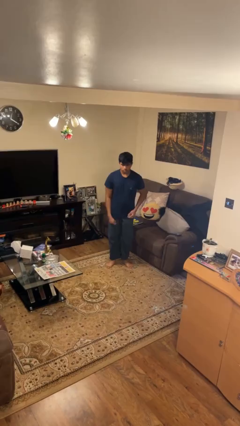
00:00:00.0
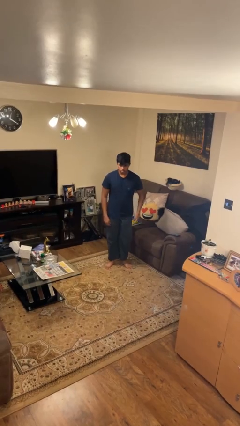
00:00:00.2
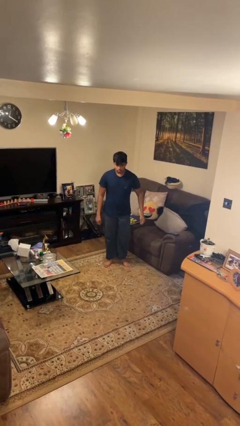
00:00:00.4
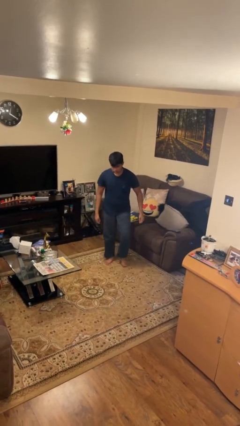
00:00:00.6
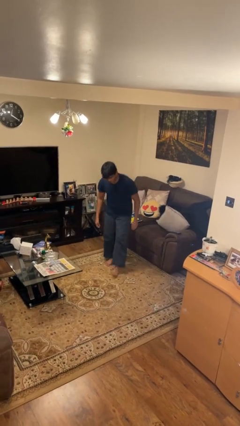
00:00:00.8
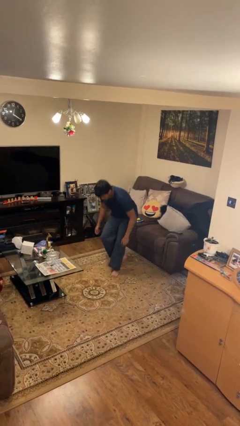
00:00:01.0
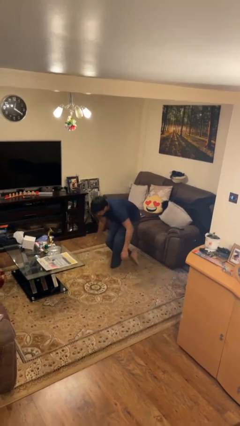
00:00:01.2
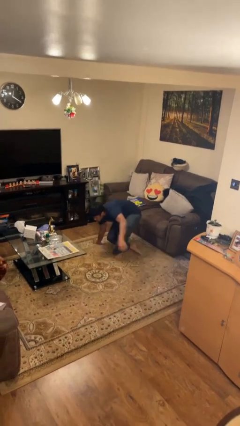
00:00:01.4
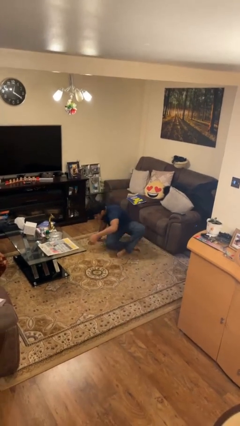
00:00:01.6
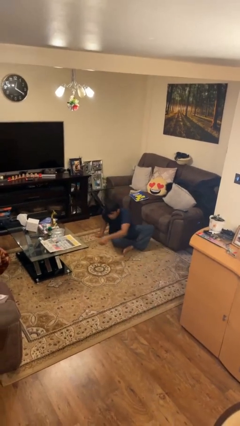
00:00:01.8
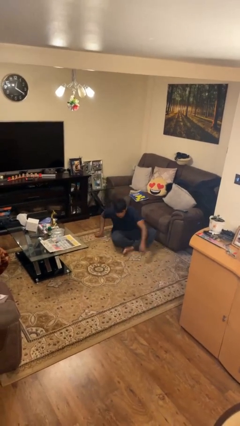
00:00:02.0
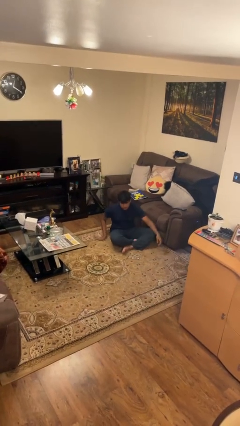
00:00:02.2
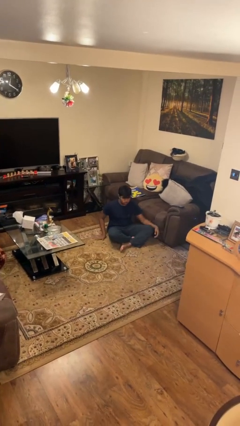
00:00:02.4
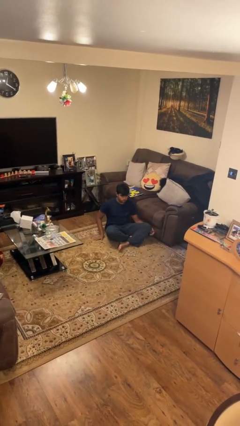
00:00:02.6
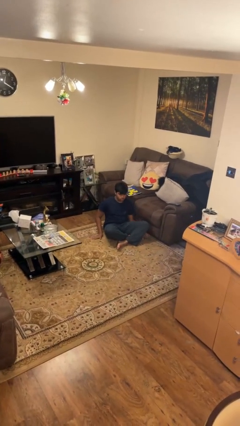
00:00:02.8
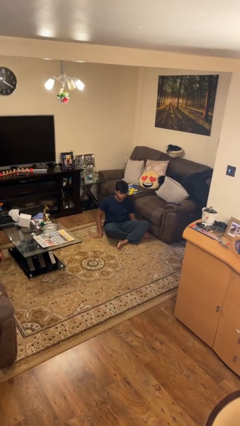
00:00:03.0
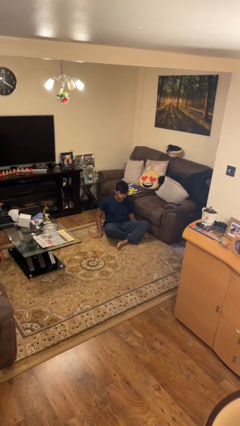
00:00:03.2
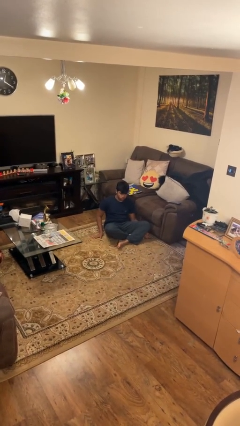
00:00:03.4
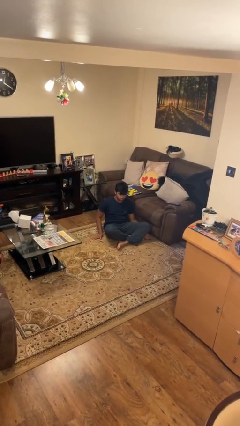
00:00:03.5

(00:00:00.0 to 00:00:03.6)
person sits crisscross

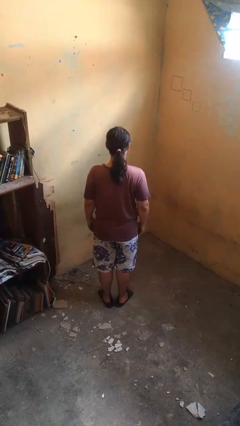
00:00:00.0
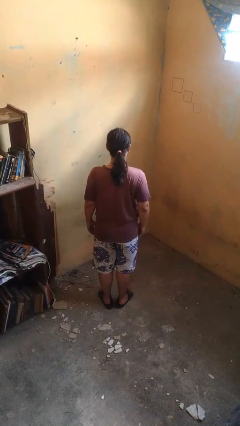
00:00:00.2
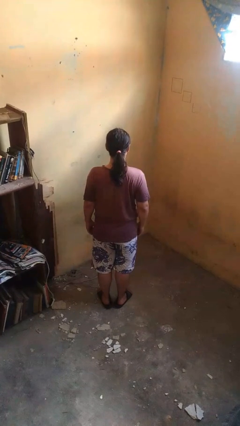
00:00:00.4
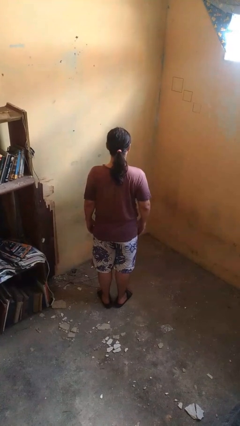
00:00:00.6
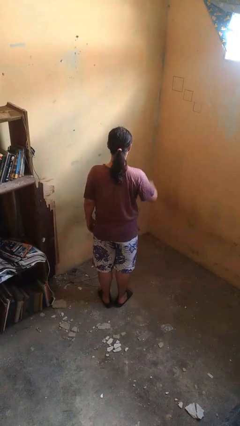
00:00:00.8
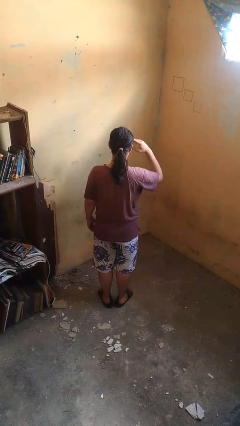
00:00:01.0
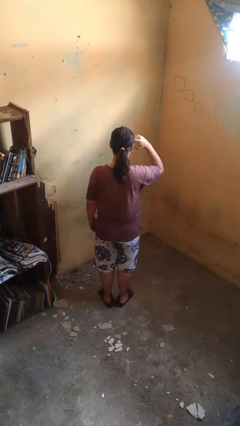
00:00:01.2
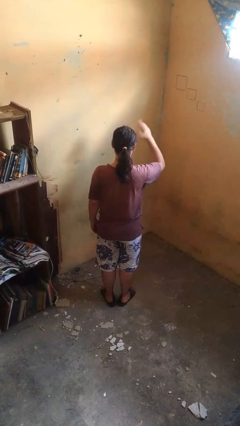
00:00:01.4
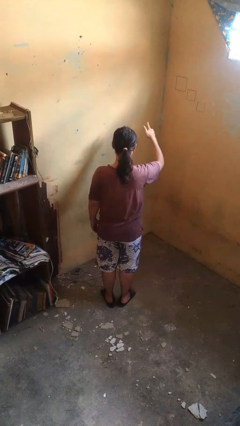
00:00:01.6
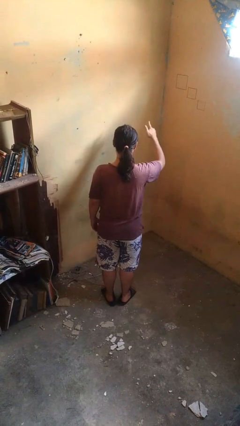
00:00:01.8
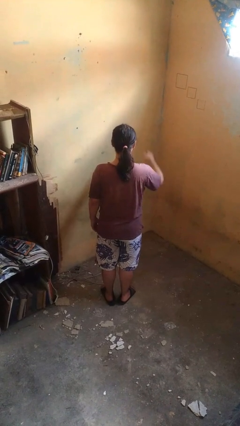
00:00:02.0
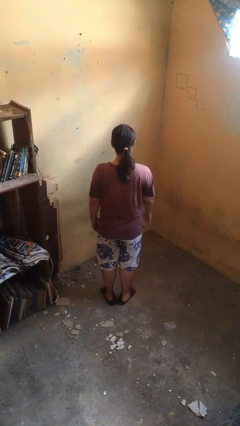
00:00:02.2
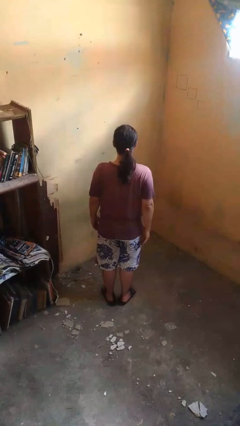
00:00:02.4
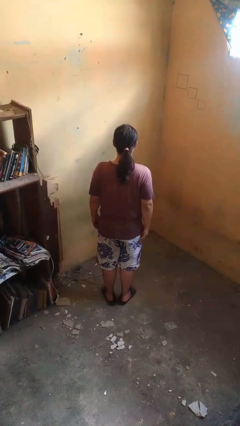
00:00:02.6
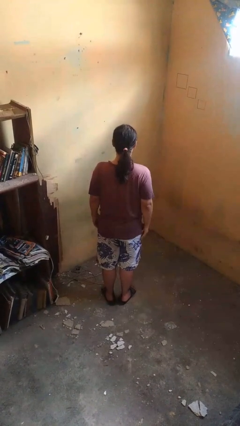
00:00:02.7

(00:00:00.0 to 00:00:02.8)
person salutes

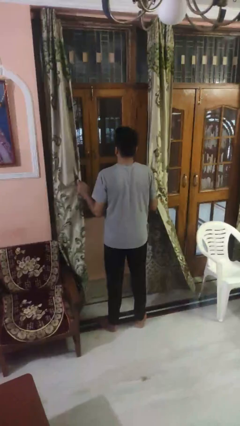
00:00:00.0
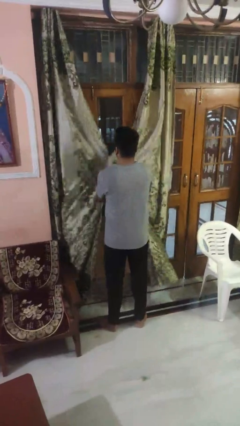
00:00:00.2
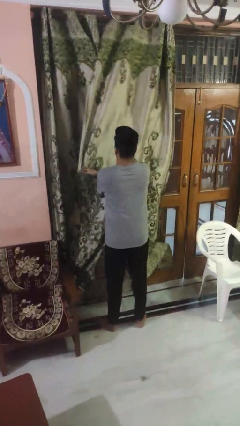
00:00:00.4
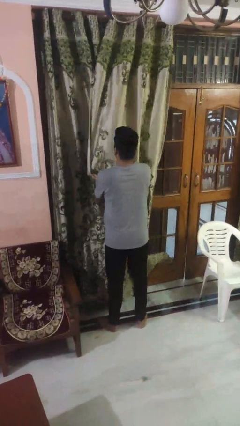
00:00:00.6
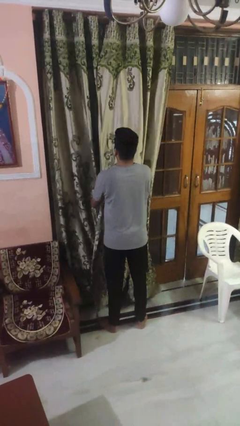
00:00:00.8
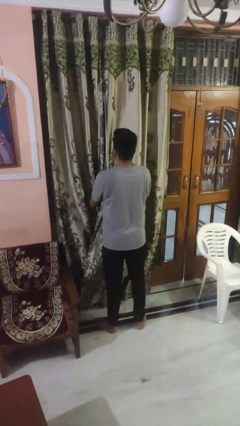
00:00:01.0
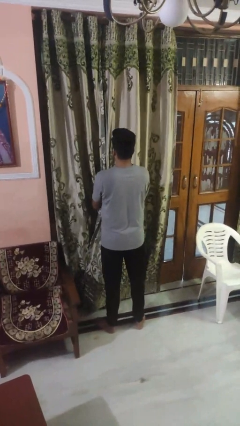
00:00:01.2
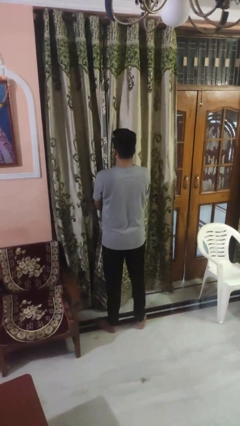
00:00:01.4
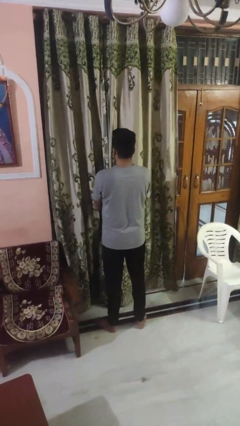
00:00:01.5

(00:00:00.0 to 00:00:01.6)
person closes curtains

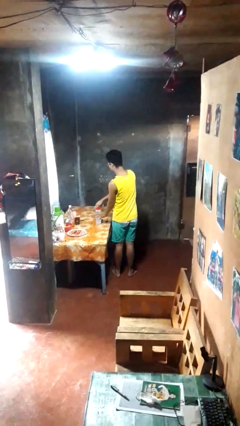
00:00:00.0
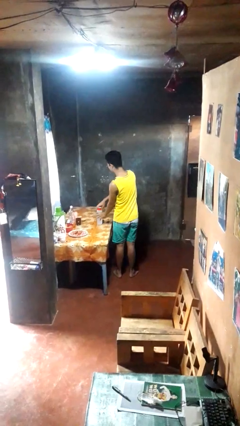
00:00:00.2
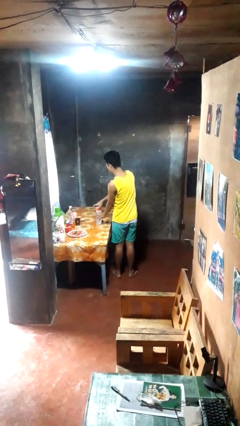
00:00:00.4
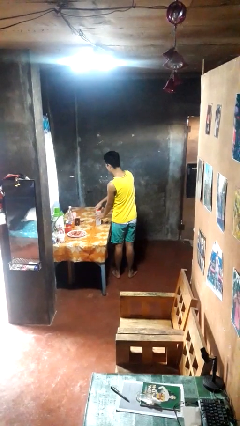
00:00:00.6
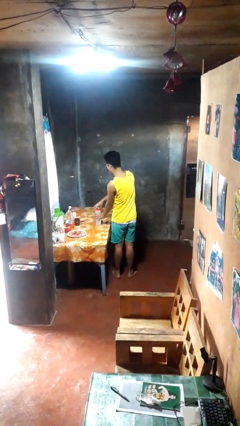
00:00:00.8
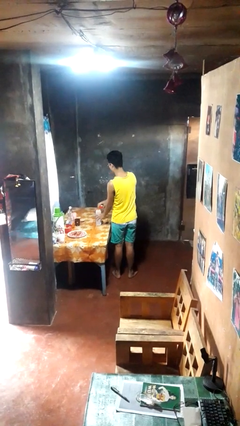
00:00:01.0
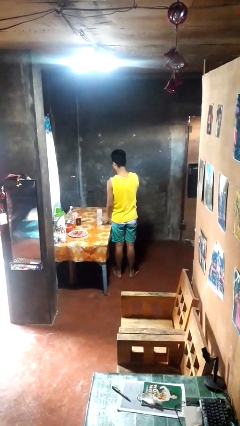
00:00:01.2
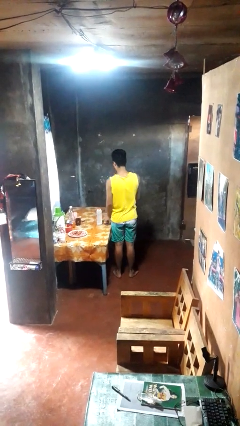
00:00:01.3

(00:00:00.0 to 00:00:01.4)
person opens jar

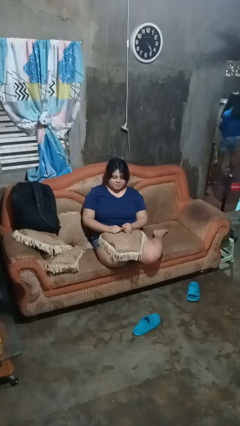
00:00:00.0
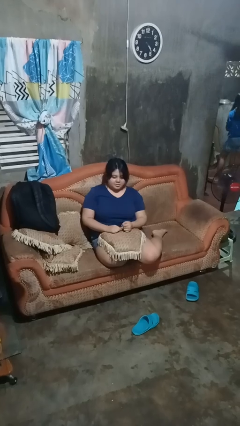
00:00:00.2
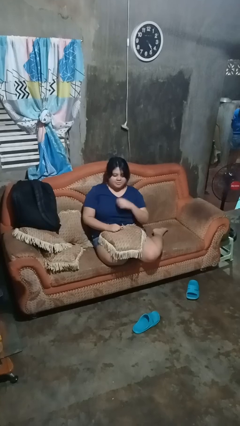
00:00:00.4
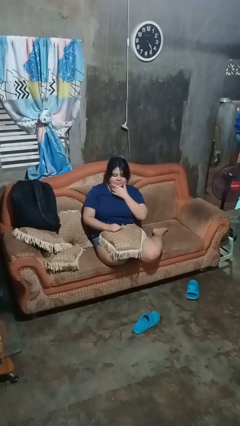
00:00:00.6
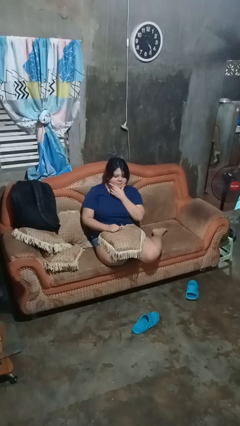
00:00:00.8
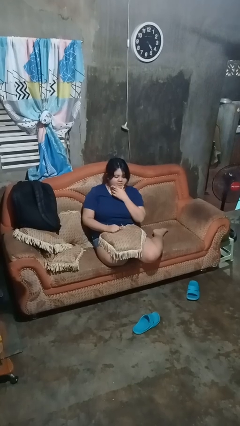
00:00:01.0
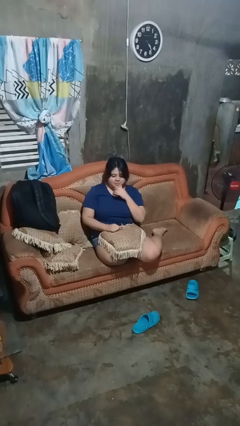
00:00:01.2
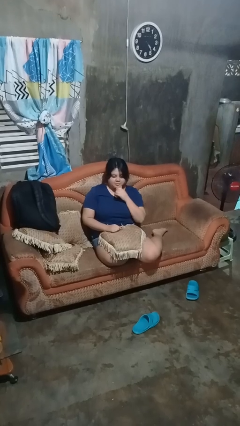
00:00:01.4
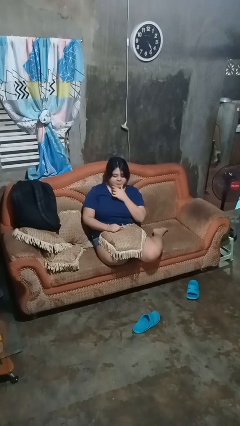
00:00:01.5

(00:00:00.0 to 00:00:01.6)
person strokes chin

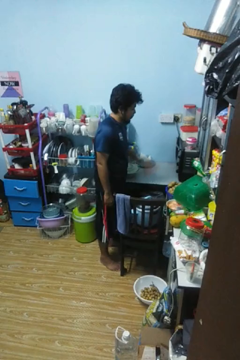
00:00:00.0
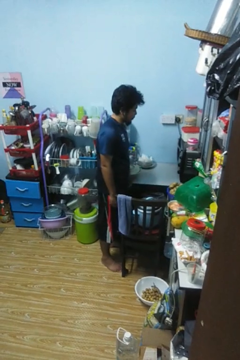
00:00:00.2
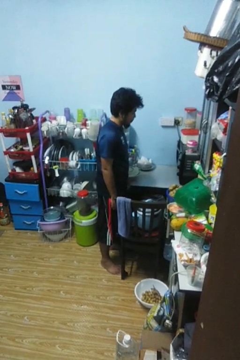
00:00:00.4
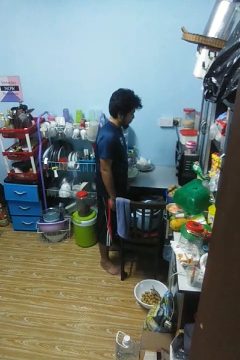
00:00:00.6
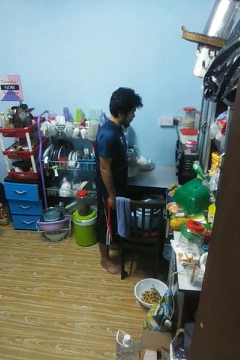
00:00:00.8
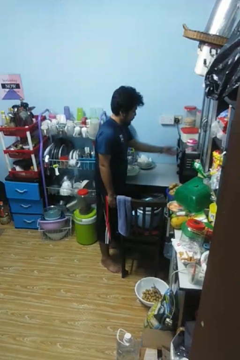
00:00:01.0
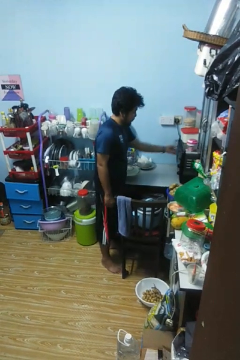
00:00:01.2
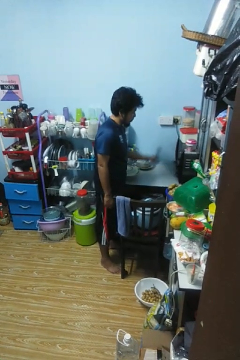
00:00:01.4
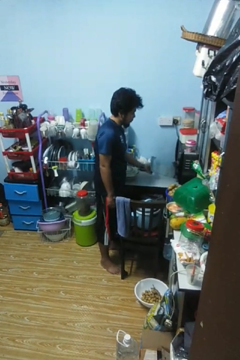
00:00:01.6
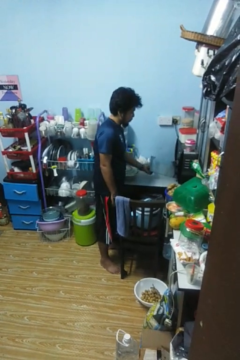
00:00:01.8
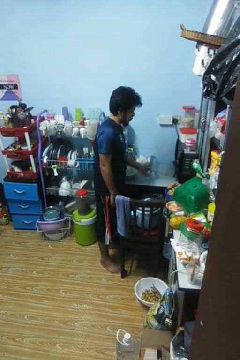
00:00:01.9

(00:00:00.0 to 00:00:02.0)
person opens oven door

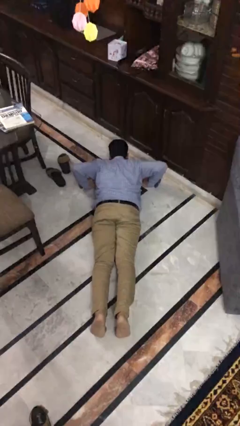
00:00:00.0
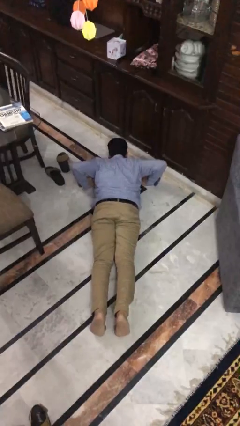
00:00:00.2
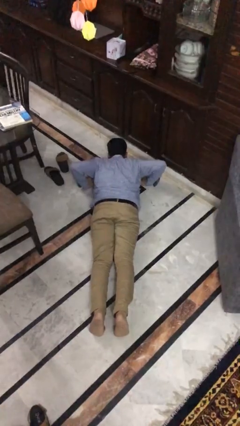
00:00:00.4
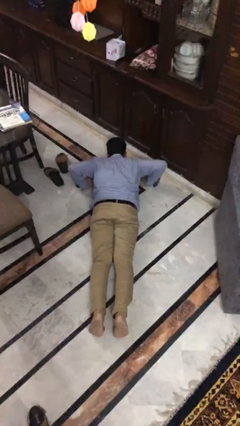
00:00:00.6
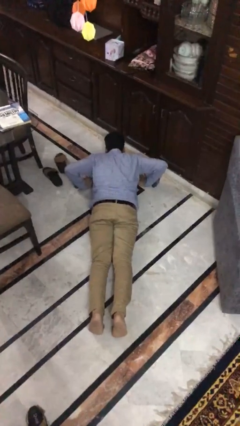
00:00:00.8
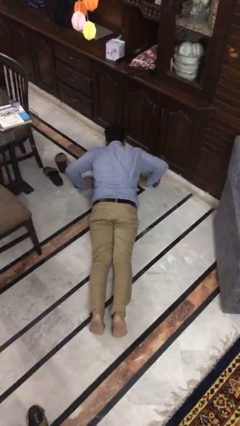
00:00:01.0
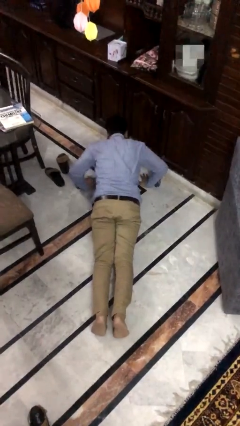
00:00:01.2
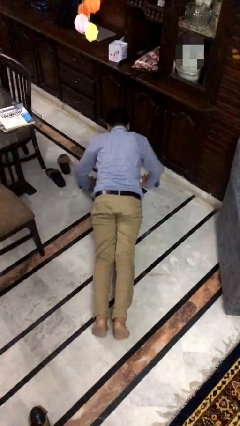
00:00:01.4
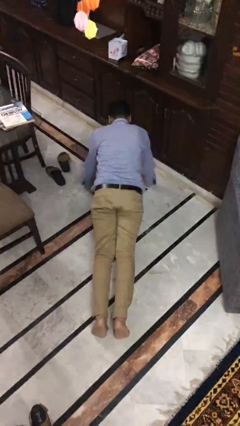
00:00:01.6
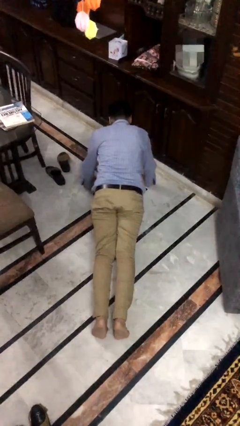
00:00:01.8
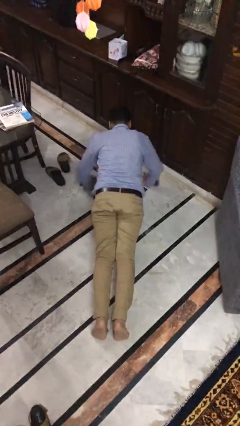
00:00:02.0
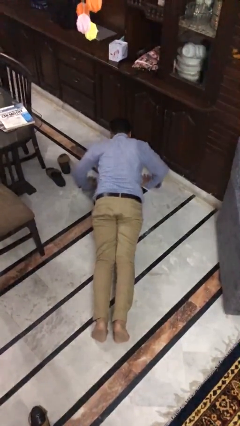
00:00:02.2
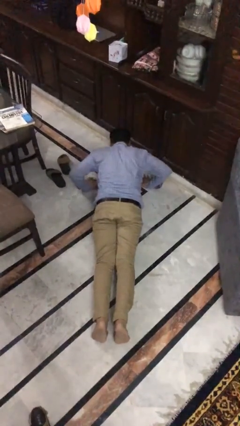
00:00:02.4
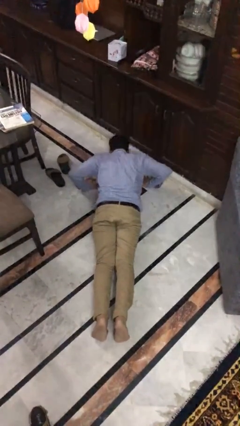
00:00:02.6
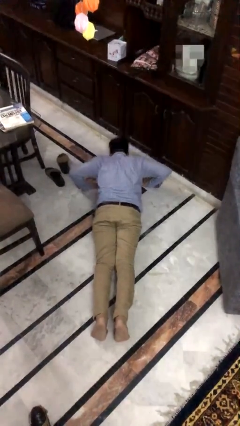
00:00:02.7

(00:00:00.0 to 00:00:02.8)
person exercises with pushup

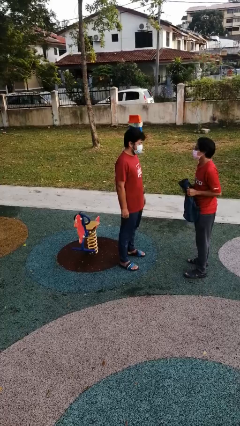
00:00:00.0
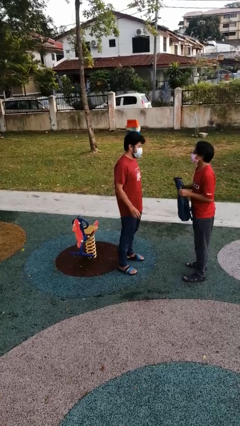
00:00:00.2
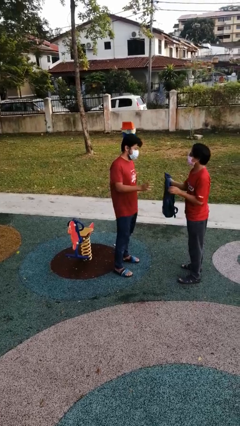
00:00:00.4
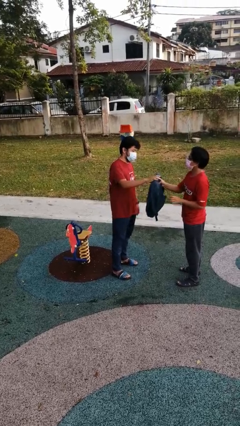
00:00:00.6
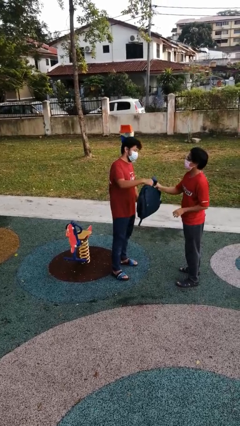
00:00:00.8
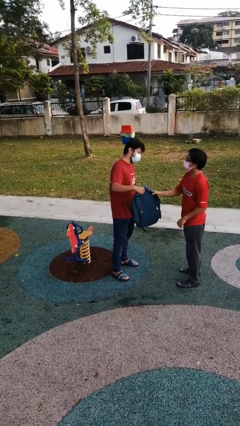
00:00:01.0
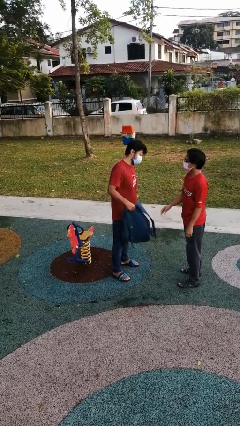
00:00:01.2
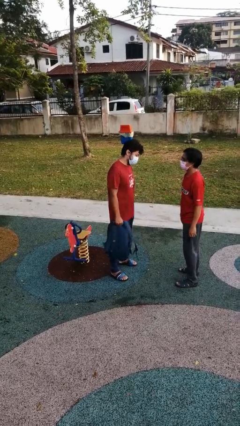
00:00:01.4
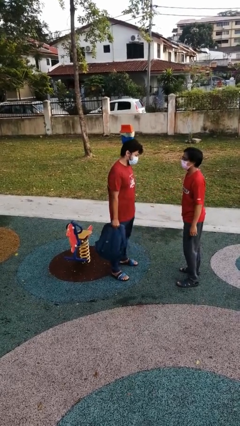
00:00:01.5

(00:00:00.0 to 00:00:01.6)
person transfers object to person
